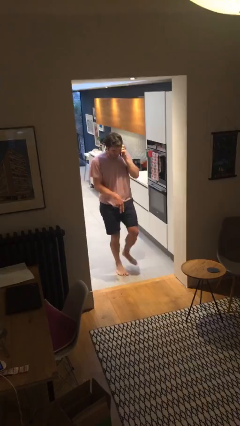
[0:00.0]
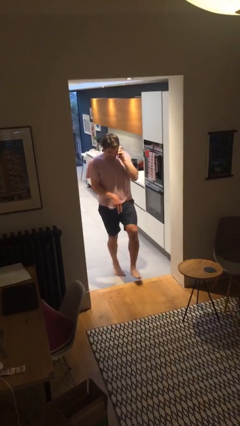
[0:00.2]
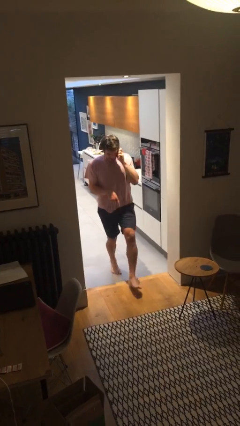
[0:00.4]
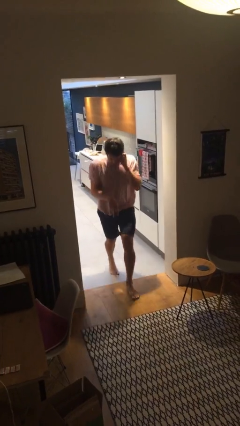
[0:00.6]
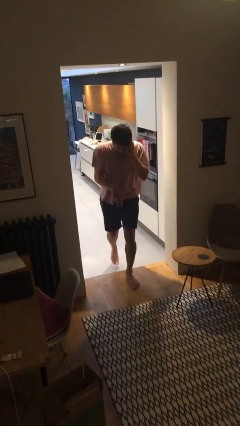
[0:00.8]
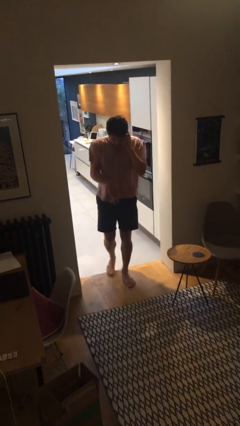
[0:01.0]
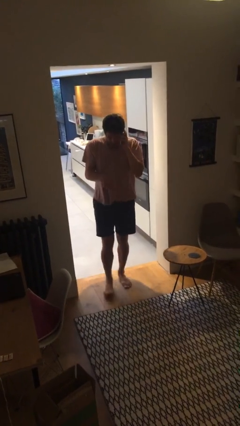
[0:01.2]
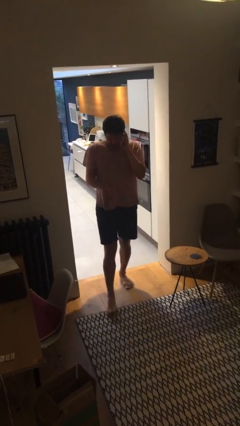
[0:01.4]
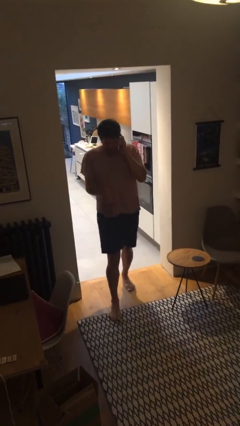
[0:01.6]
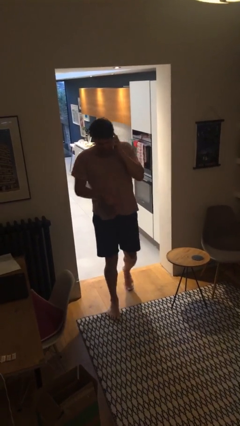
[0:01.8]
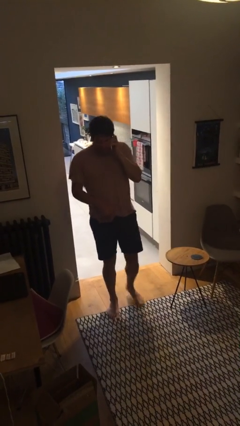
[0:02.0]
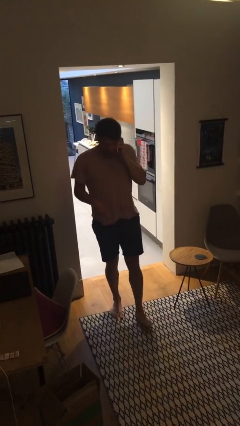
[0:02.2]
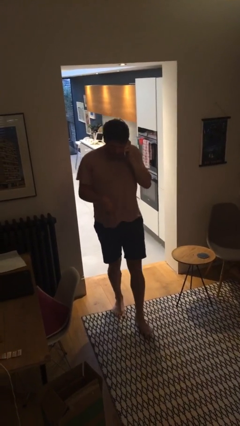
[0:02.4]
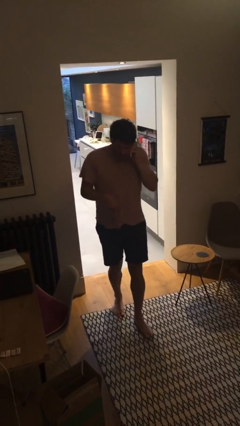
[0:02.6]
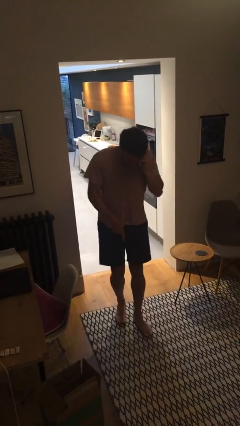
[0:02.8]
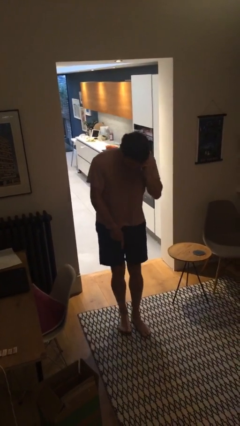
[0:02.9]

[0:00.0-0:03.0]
person enters scene through structure

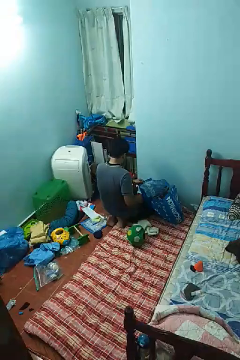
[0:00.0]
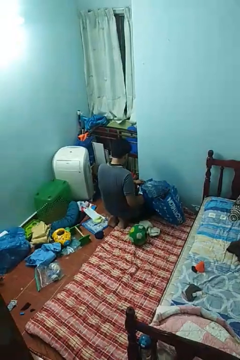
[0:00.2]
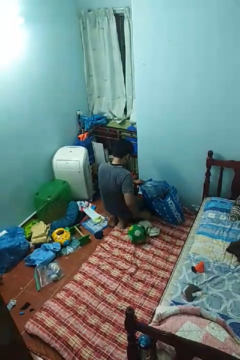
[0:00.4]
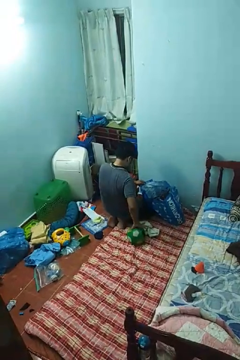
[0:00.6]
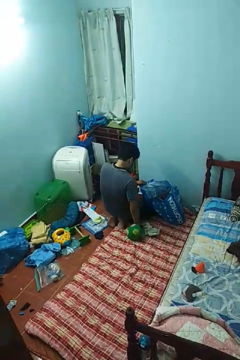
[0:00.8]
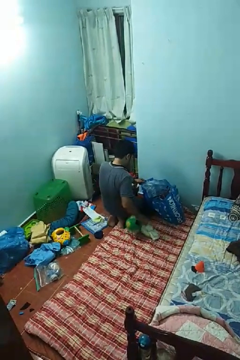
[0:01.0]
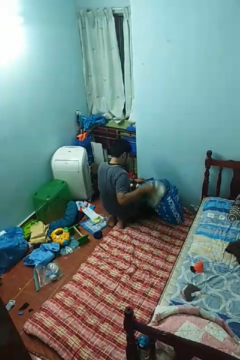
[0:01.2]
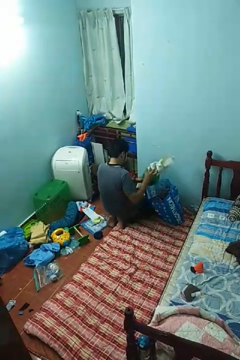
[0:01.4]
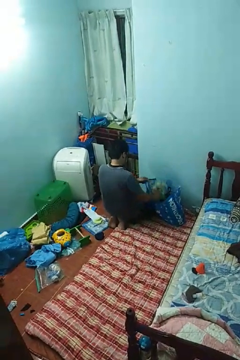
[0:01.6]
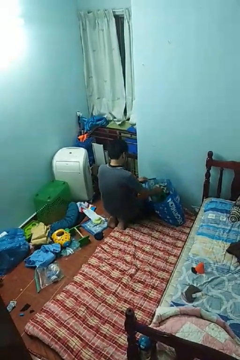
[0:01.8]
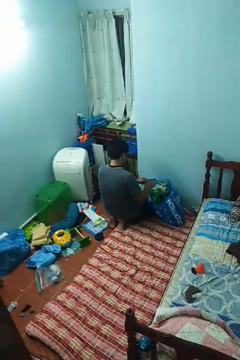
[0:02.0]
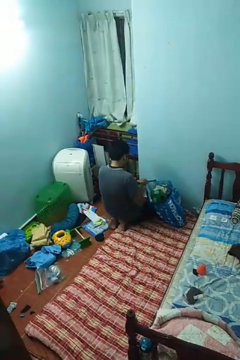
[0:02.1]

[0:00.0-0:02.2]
person puts object into bag

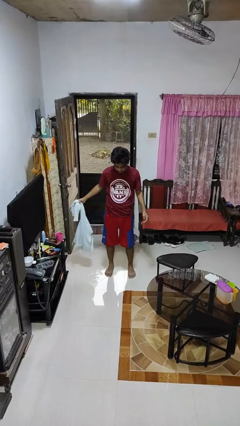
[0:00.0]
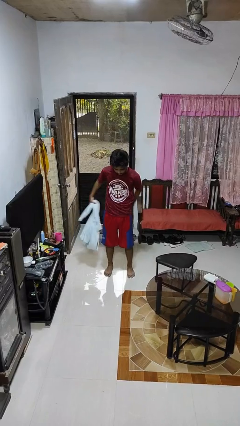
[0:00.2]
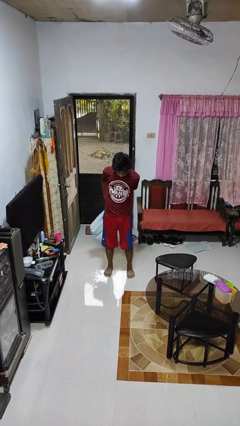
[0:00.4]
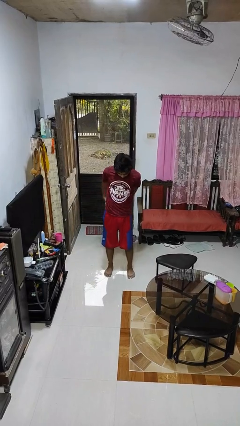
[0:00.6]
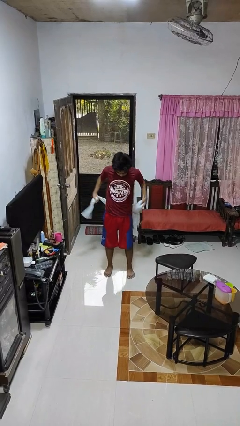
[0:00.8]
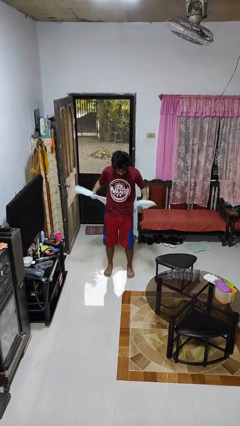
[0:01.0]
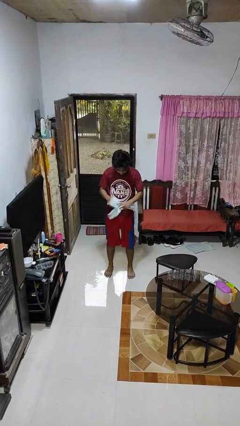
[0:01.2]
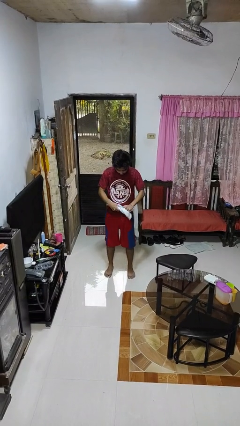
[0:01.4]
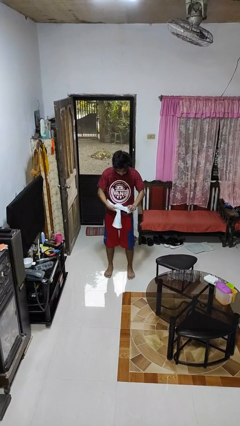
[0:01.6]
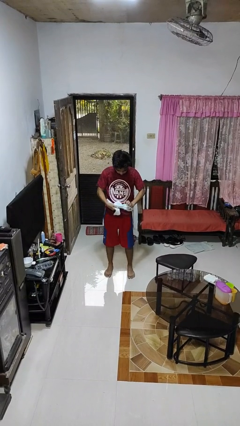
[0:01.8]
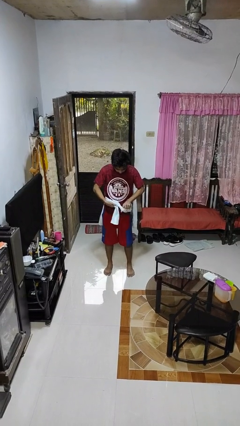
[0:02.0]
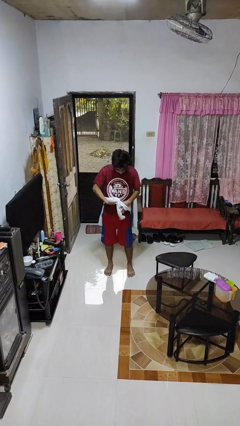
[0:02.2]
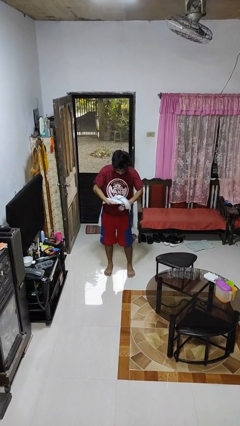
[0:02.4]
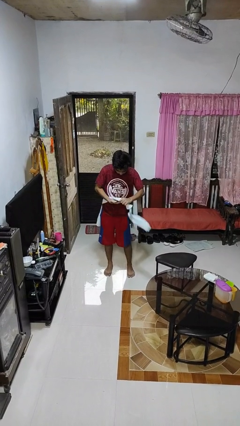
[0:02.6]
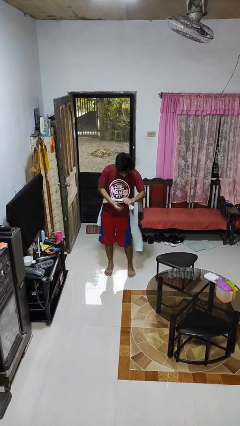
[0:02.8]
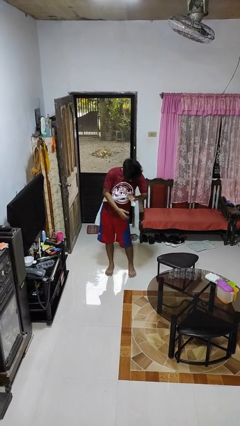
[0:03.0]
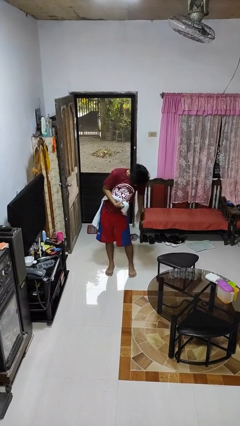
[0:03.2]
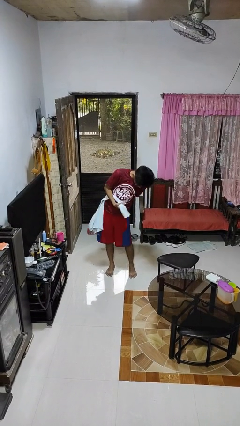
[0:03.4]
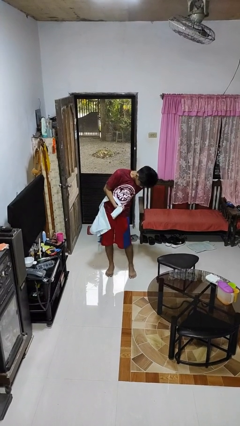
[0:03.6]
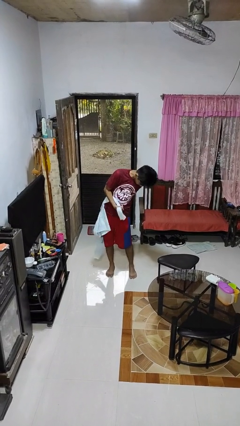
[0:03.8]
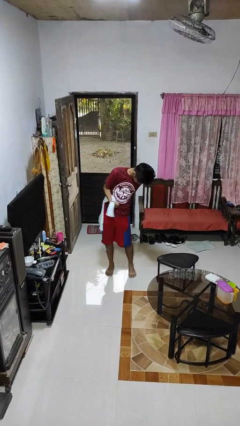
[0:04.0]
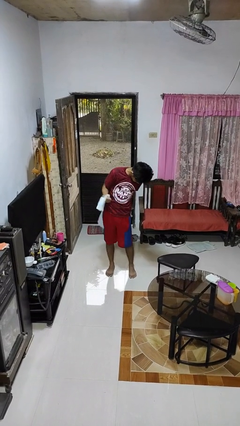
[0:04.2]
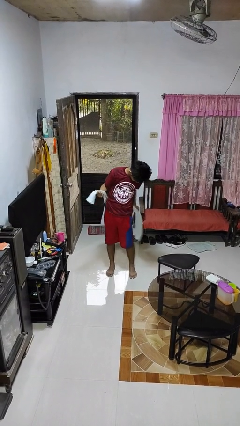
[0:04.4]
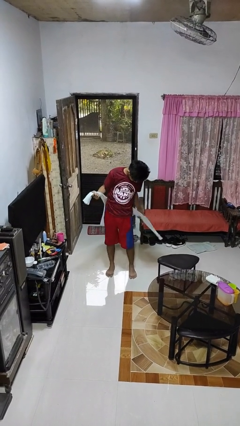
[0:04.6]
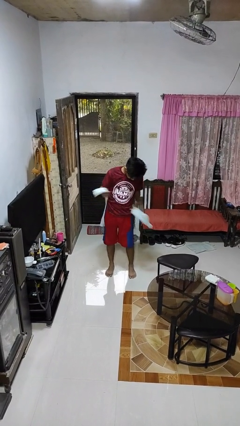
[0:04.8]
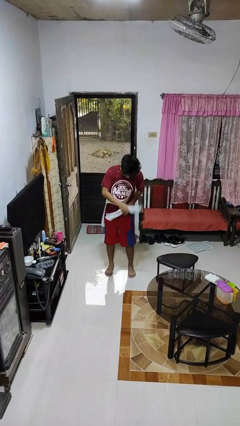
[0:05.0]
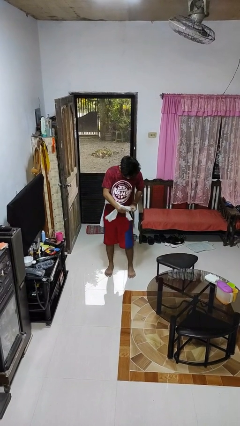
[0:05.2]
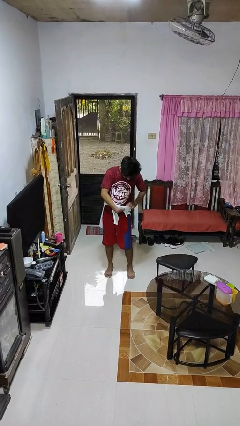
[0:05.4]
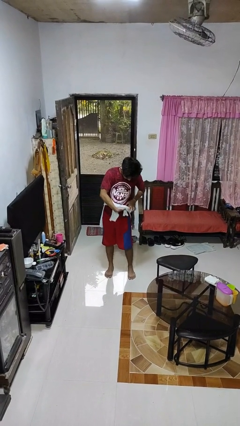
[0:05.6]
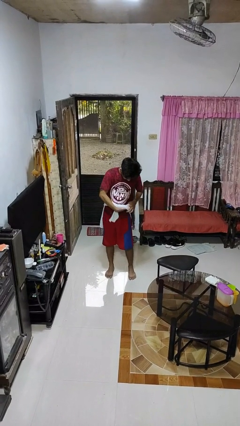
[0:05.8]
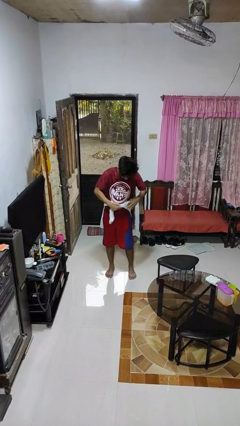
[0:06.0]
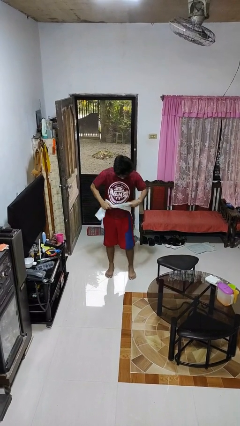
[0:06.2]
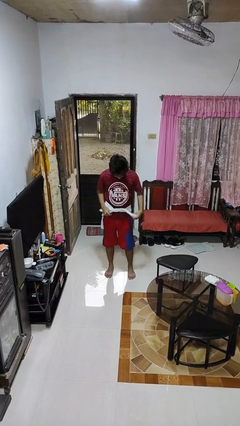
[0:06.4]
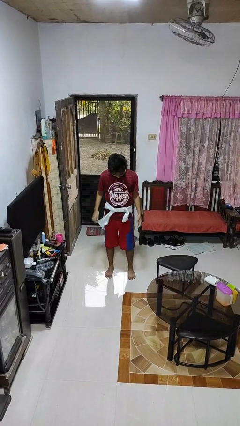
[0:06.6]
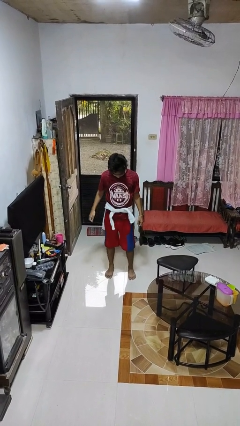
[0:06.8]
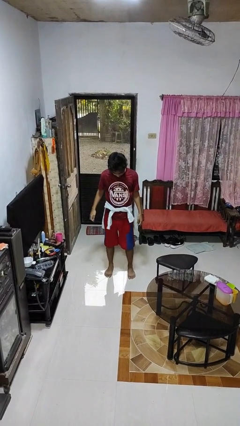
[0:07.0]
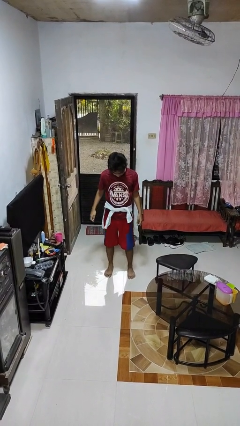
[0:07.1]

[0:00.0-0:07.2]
person ties jacket around waist

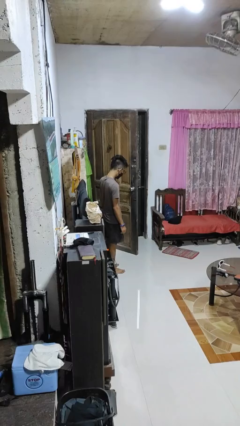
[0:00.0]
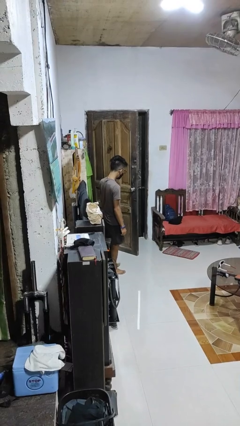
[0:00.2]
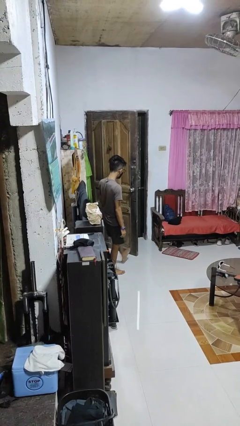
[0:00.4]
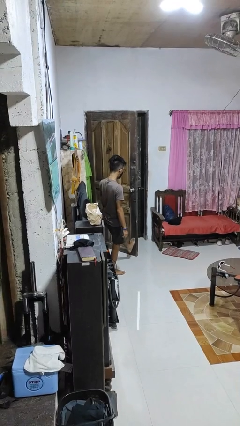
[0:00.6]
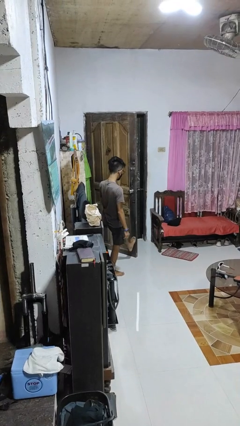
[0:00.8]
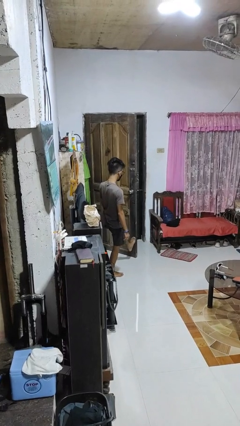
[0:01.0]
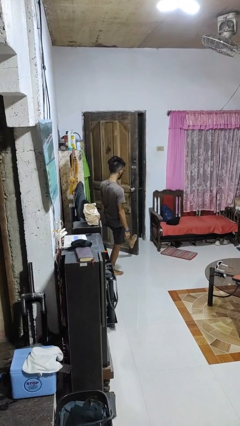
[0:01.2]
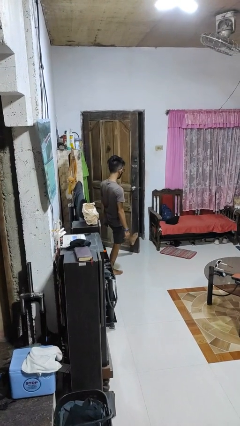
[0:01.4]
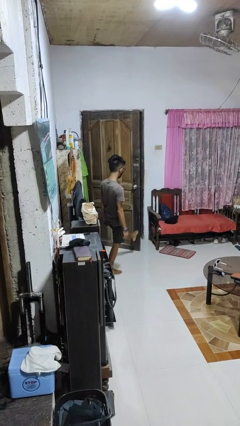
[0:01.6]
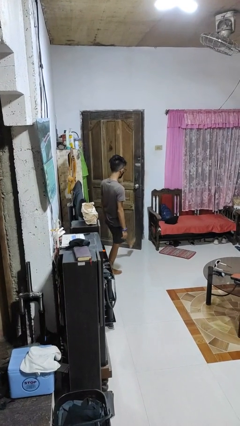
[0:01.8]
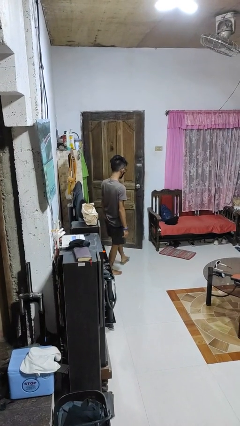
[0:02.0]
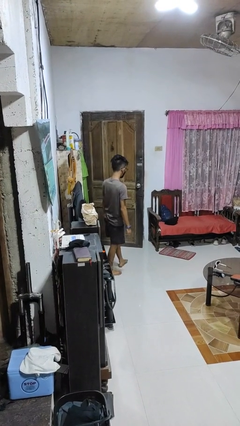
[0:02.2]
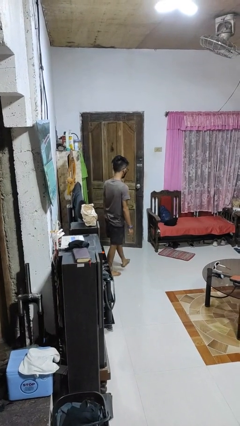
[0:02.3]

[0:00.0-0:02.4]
person closes door with foot

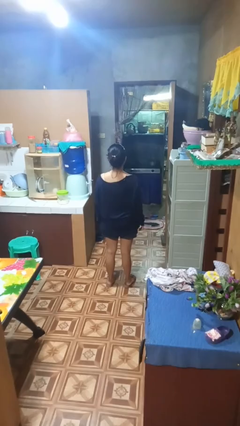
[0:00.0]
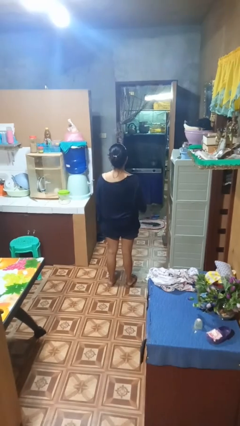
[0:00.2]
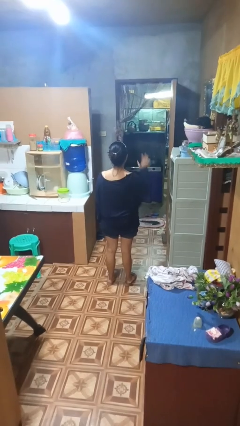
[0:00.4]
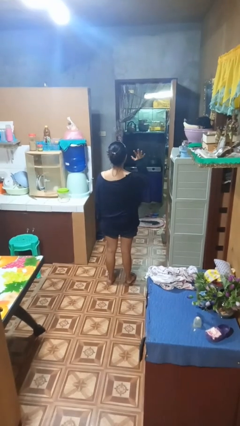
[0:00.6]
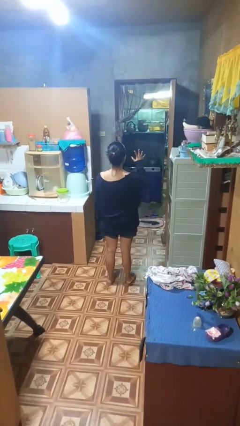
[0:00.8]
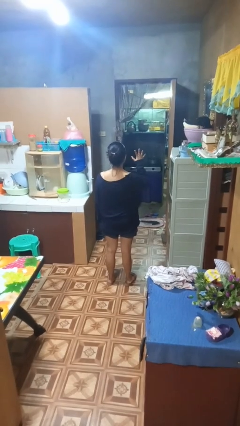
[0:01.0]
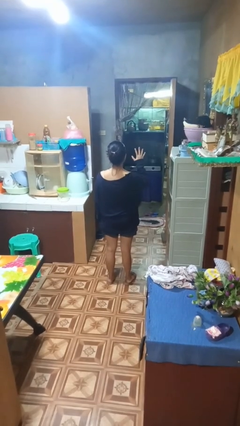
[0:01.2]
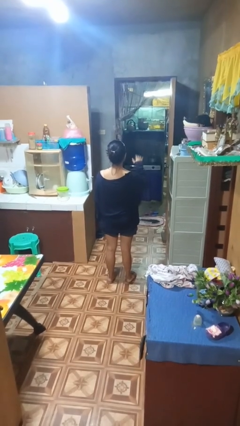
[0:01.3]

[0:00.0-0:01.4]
person gestures number five

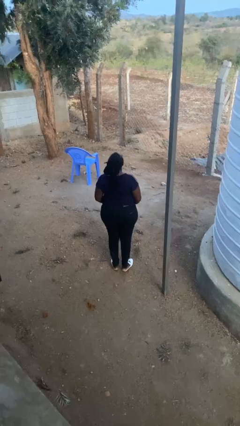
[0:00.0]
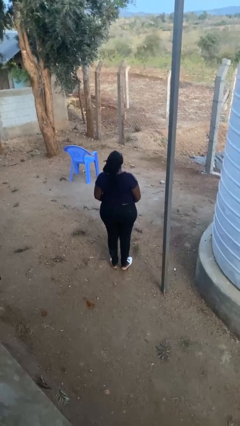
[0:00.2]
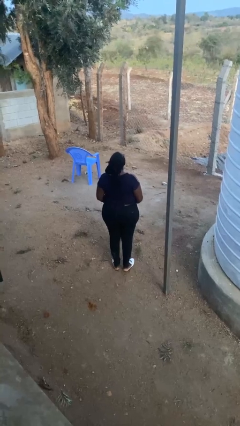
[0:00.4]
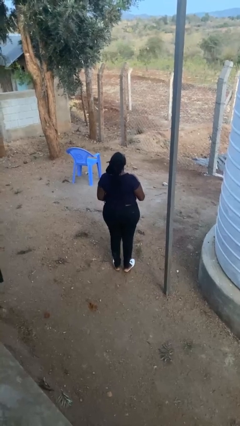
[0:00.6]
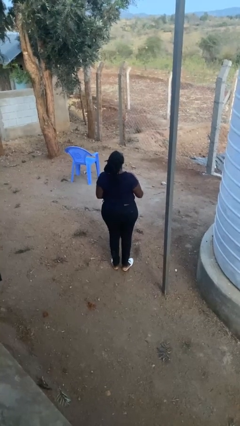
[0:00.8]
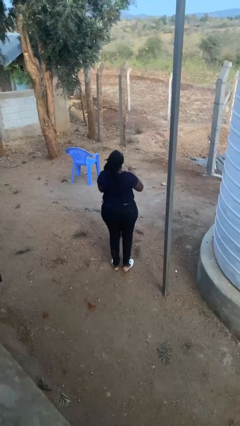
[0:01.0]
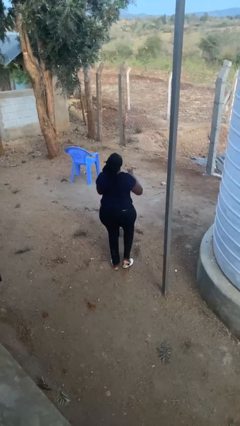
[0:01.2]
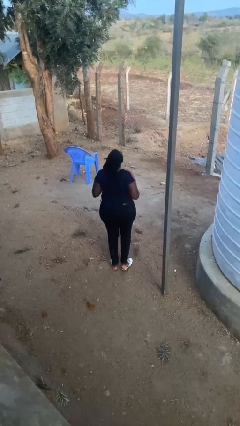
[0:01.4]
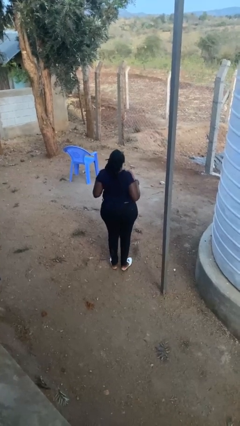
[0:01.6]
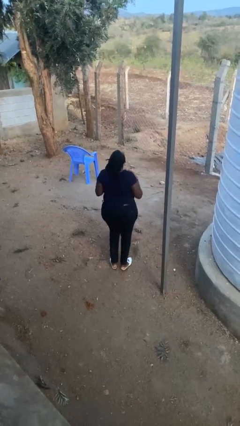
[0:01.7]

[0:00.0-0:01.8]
person dances in place
